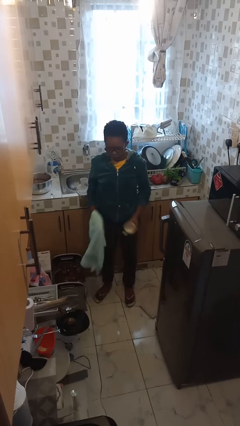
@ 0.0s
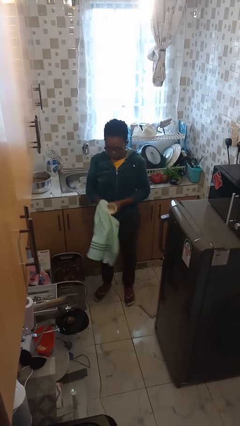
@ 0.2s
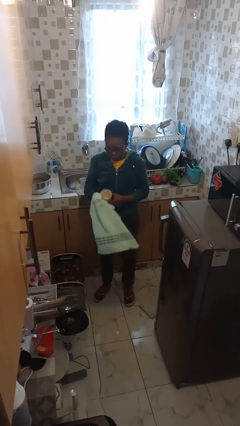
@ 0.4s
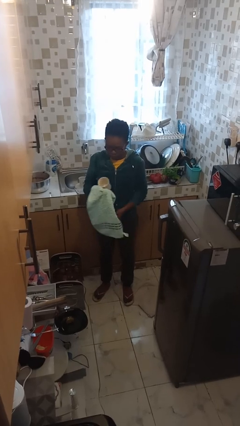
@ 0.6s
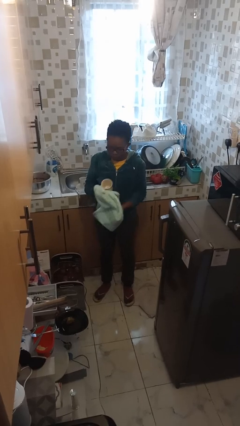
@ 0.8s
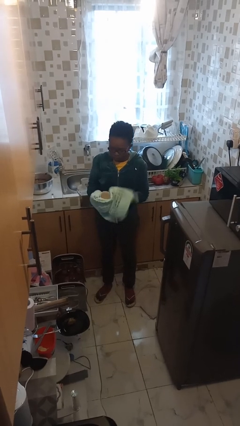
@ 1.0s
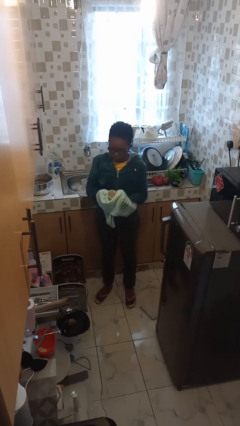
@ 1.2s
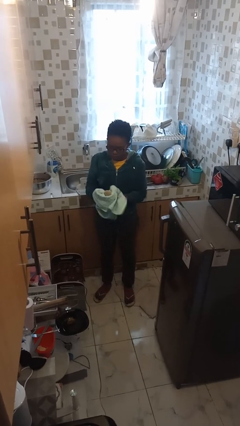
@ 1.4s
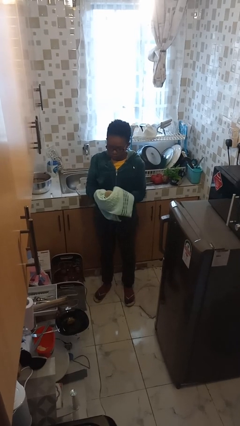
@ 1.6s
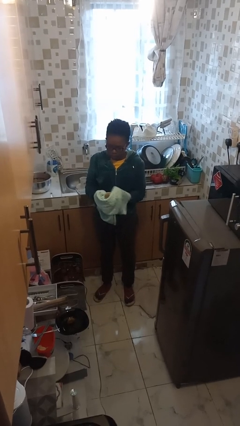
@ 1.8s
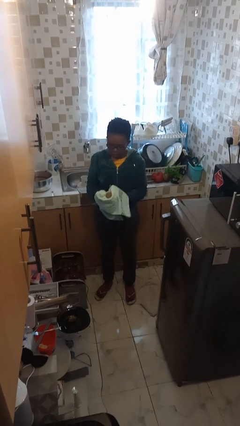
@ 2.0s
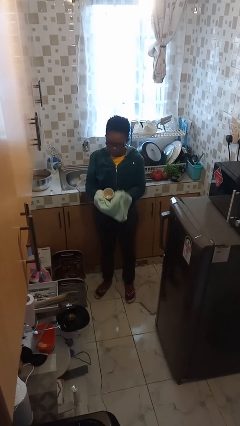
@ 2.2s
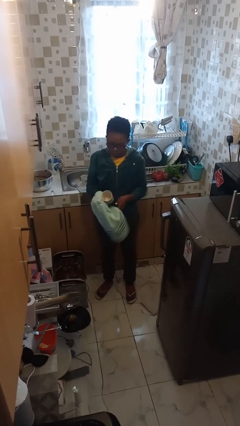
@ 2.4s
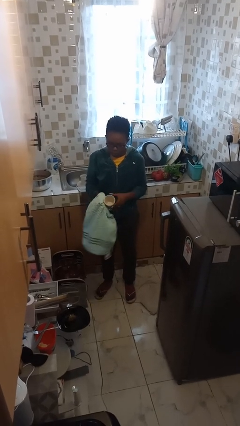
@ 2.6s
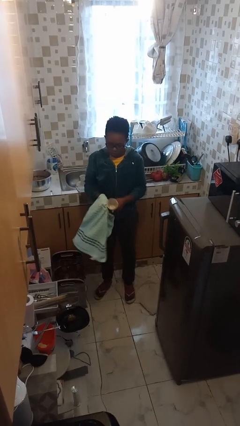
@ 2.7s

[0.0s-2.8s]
person dries dish

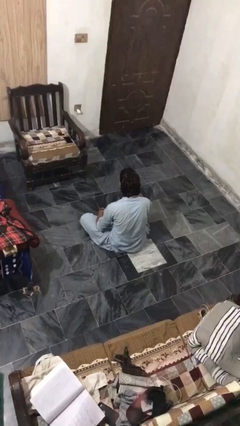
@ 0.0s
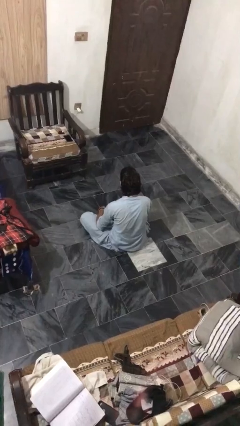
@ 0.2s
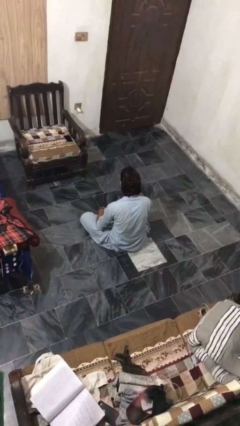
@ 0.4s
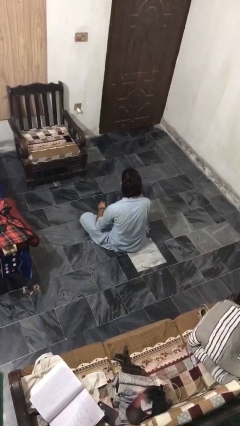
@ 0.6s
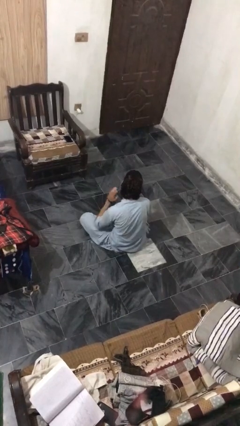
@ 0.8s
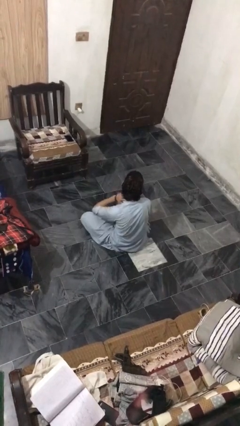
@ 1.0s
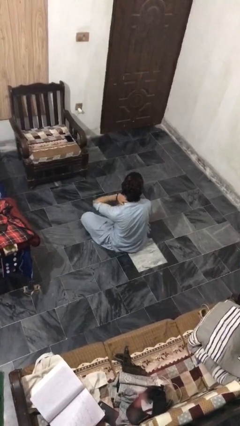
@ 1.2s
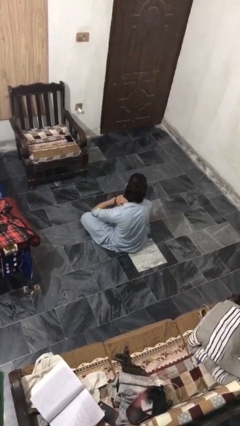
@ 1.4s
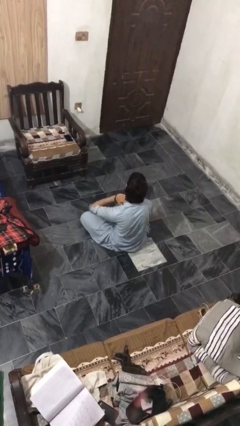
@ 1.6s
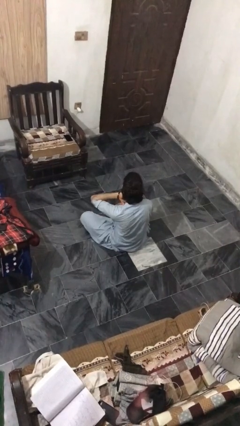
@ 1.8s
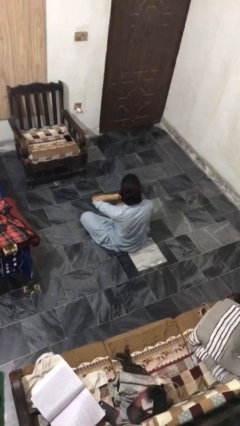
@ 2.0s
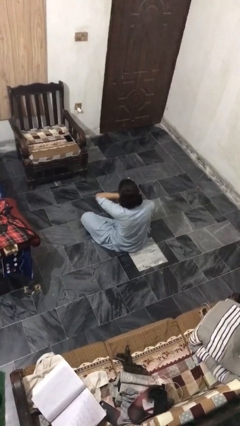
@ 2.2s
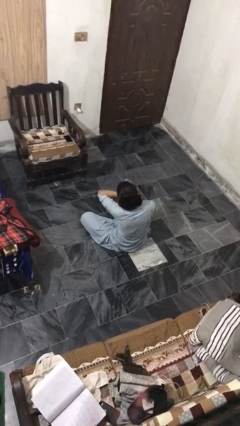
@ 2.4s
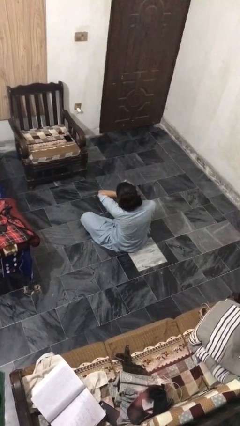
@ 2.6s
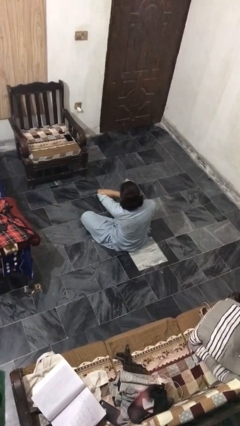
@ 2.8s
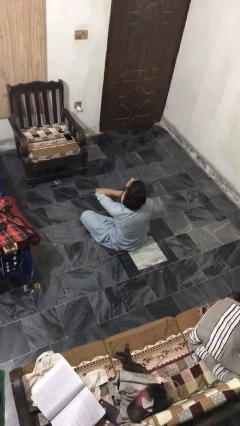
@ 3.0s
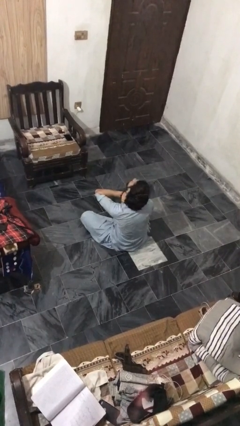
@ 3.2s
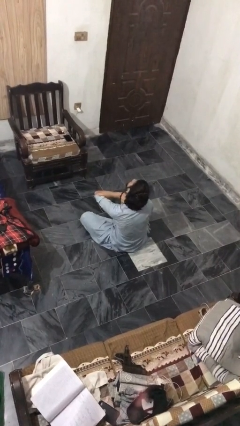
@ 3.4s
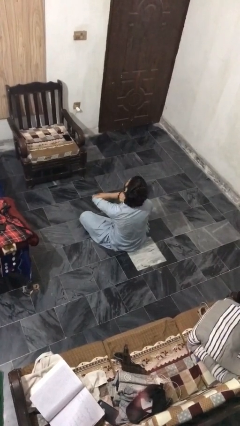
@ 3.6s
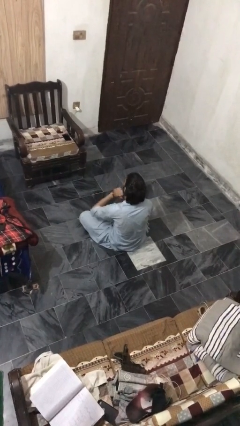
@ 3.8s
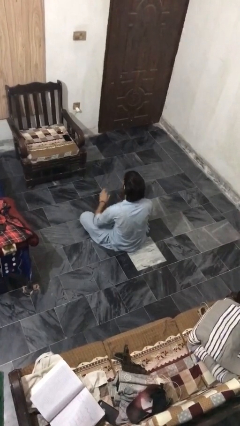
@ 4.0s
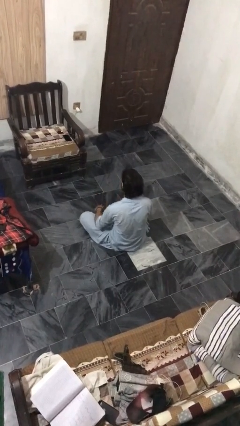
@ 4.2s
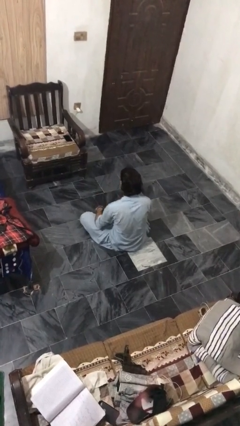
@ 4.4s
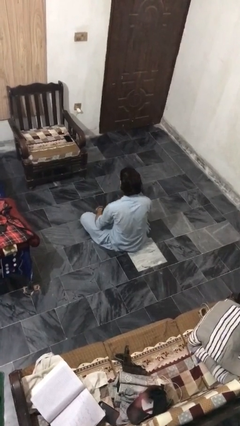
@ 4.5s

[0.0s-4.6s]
person rubs neck

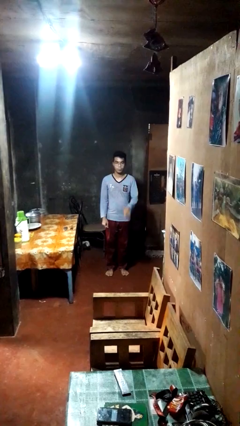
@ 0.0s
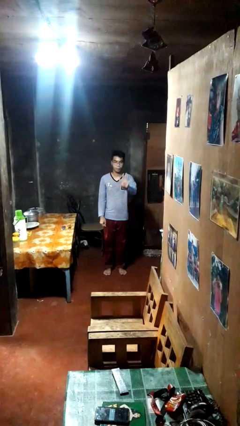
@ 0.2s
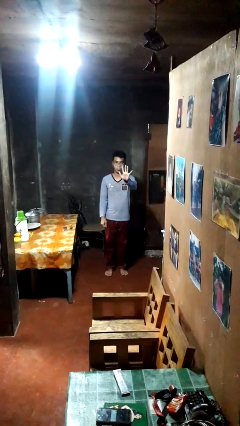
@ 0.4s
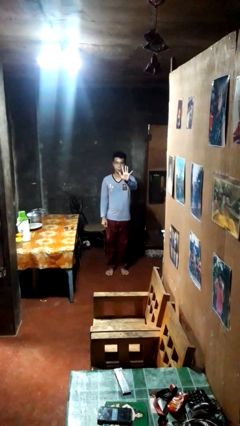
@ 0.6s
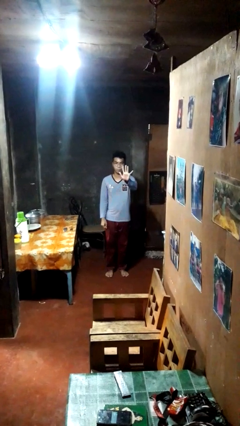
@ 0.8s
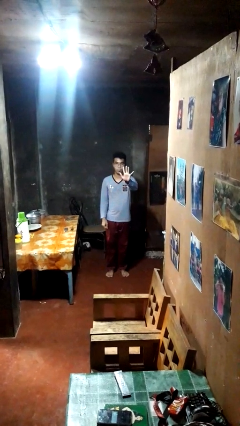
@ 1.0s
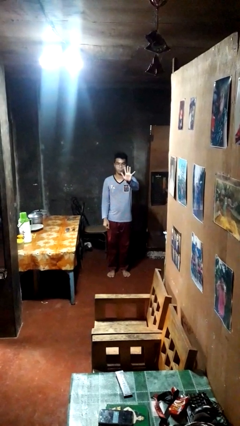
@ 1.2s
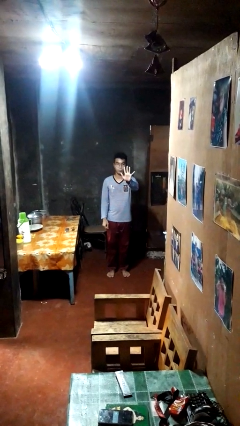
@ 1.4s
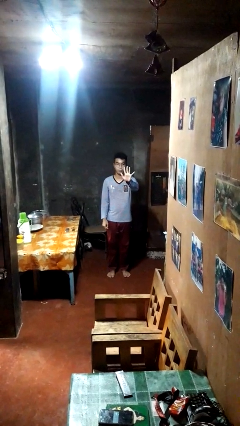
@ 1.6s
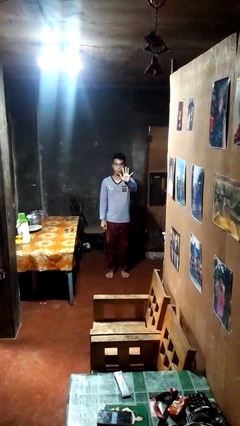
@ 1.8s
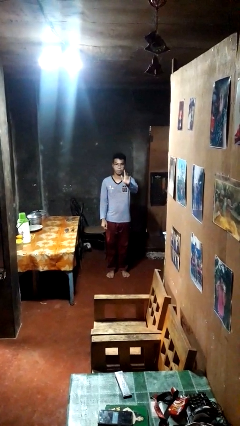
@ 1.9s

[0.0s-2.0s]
person gestures number five

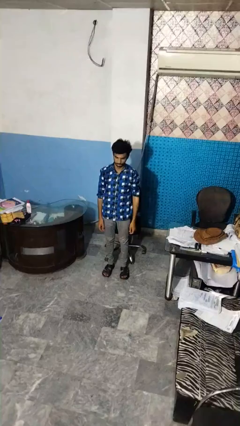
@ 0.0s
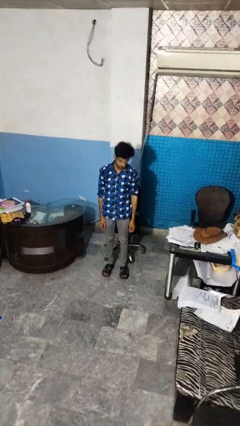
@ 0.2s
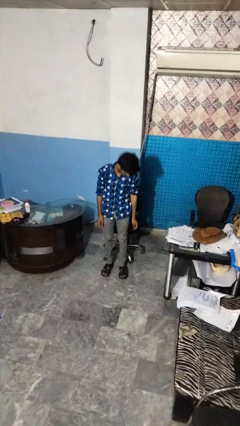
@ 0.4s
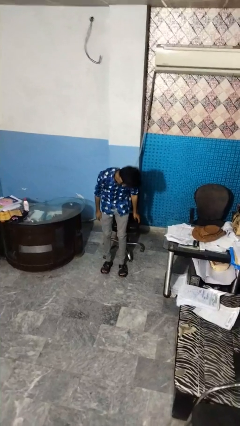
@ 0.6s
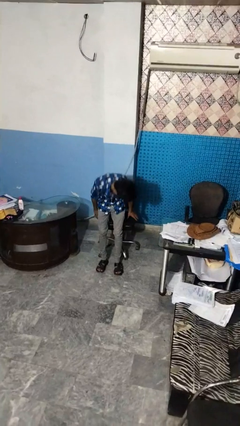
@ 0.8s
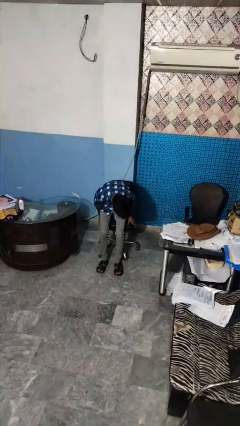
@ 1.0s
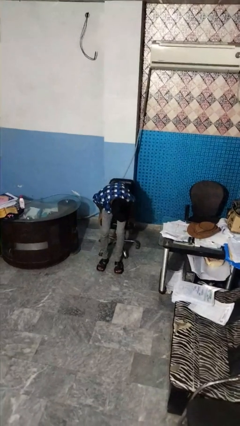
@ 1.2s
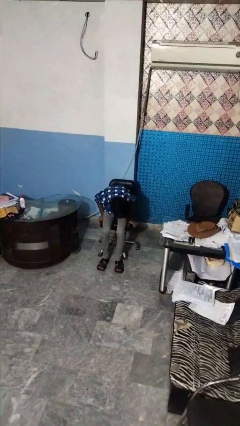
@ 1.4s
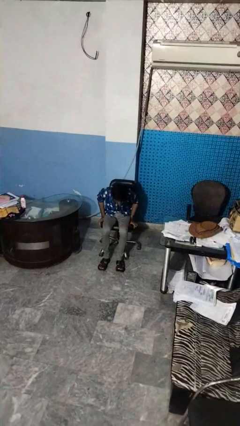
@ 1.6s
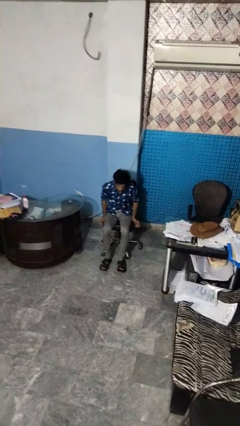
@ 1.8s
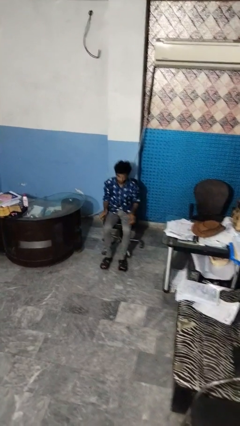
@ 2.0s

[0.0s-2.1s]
person sits down

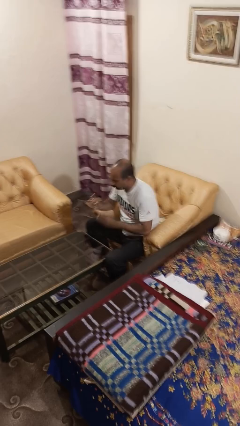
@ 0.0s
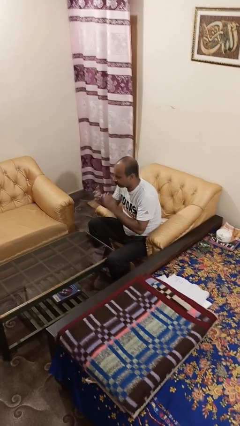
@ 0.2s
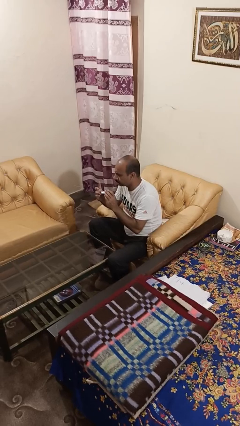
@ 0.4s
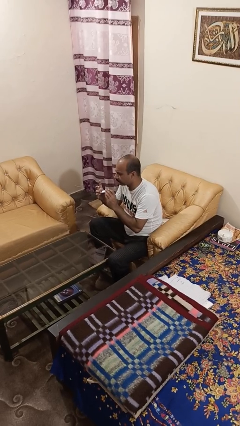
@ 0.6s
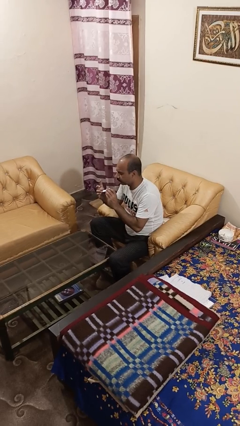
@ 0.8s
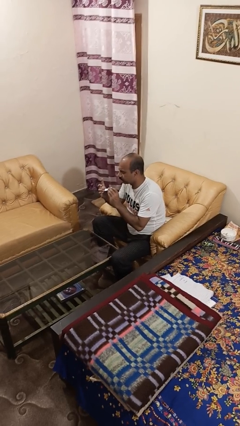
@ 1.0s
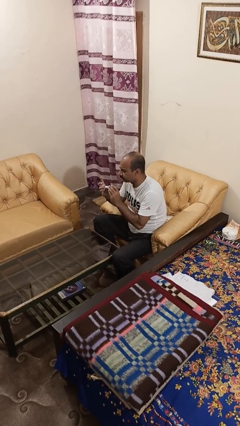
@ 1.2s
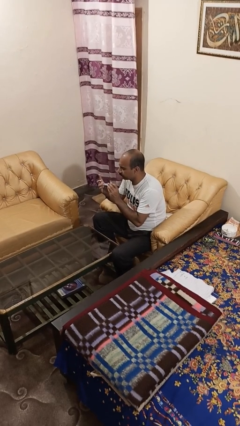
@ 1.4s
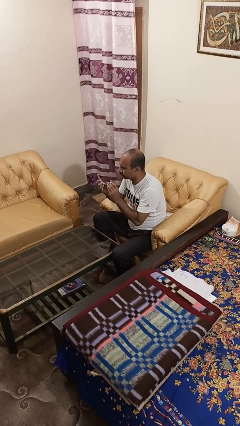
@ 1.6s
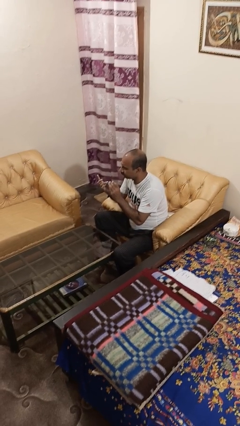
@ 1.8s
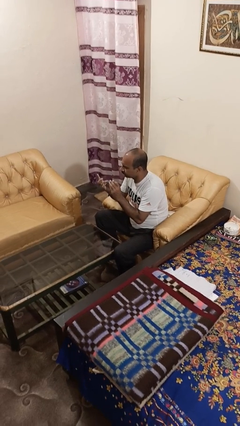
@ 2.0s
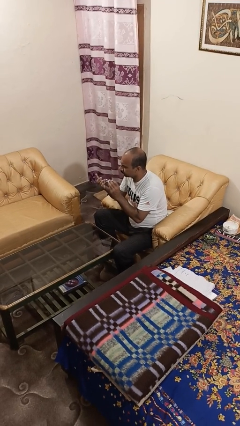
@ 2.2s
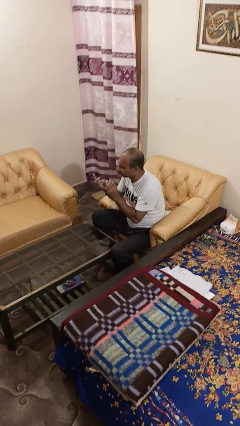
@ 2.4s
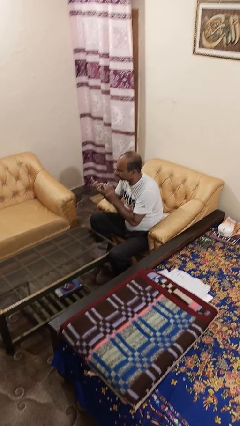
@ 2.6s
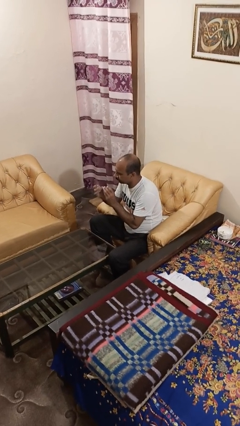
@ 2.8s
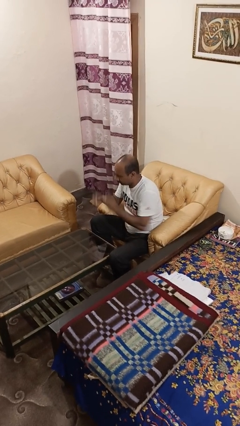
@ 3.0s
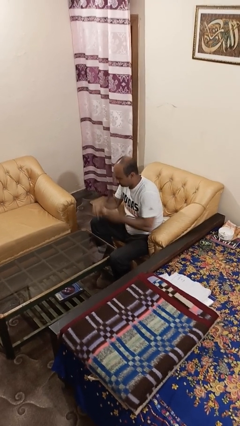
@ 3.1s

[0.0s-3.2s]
person clips fingernails

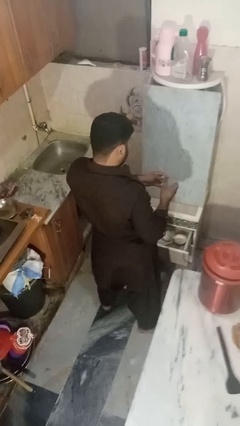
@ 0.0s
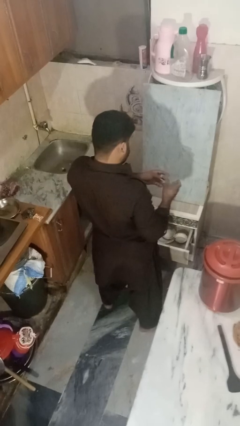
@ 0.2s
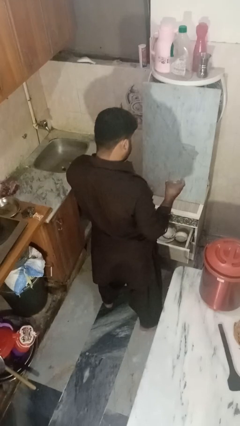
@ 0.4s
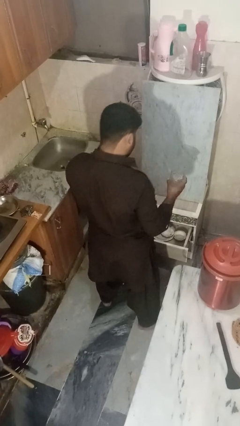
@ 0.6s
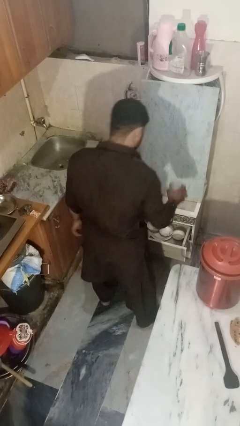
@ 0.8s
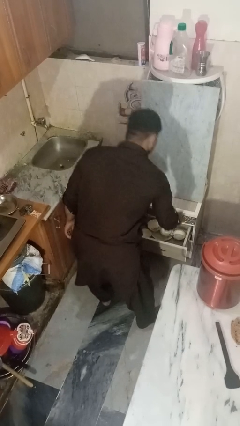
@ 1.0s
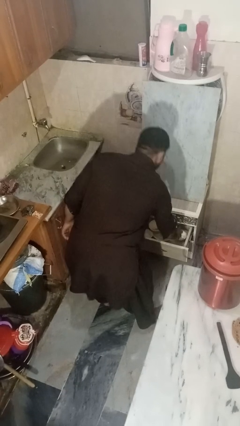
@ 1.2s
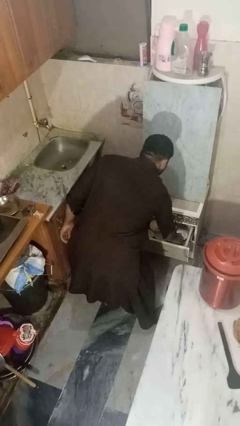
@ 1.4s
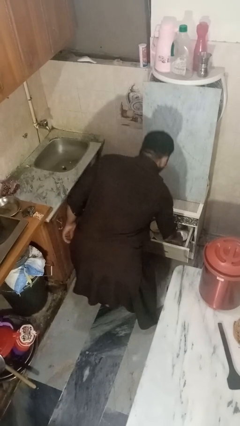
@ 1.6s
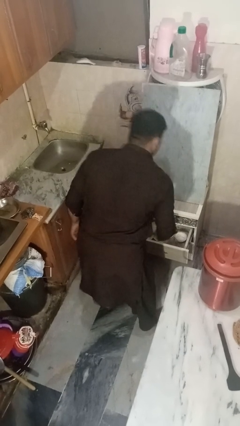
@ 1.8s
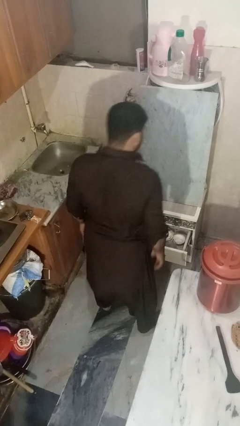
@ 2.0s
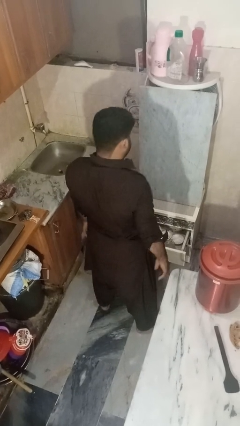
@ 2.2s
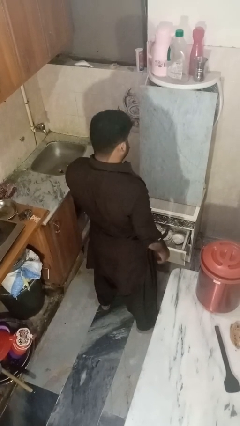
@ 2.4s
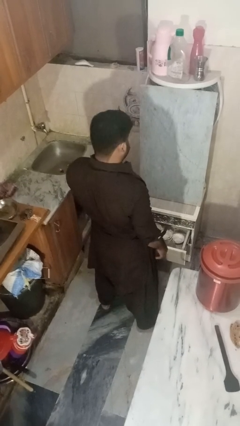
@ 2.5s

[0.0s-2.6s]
person puts object into kitchen drawer

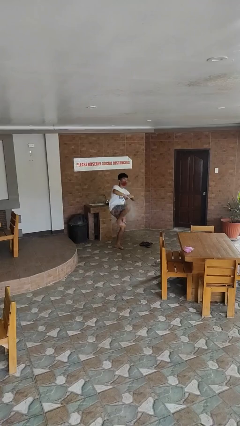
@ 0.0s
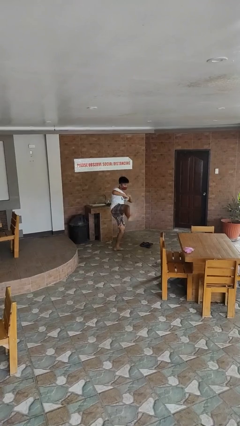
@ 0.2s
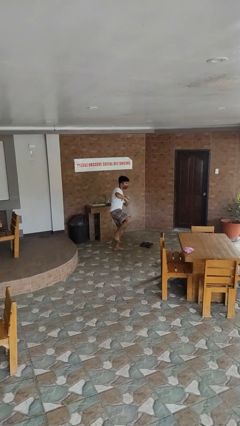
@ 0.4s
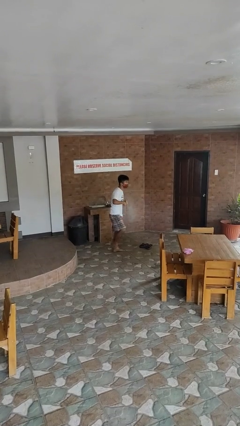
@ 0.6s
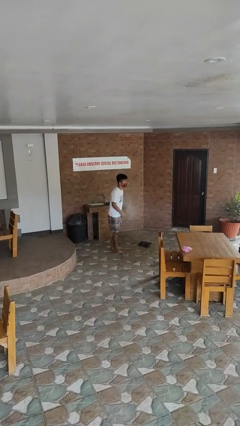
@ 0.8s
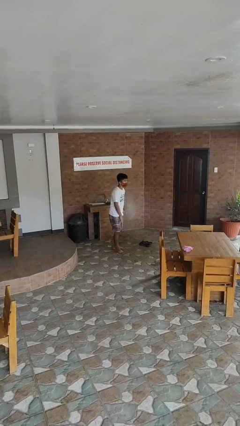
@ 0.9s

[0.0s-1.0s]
person karate kicks
